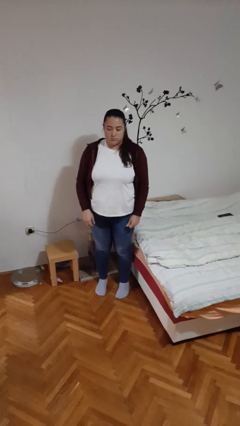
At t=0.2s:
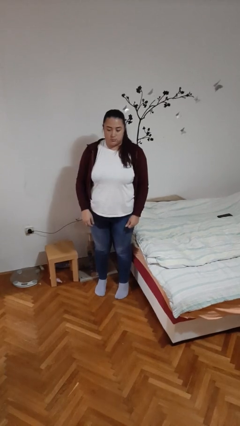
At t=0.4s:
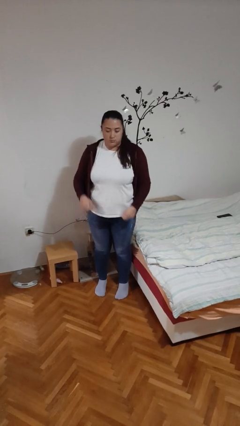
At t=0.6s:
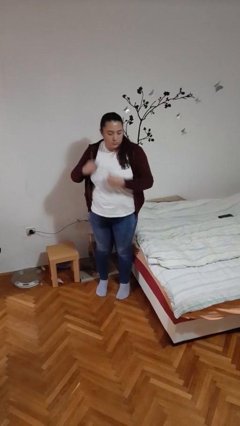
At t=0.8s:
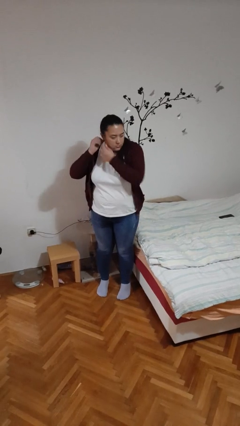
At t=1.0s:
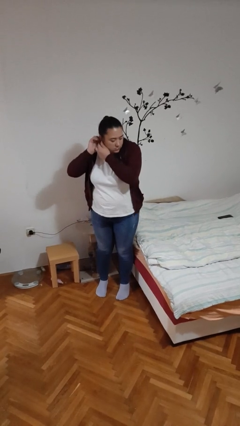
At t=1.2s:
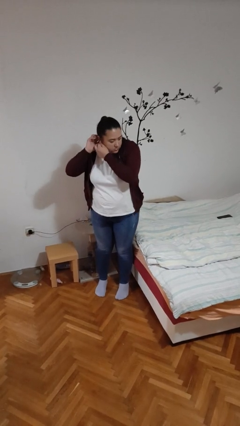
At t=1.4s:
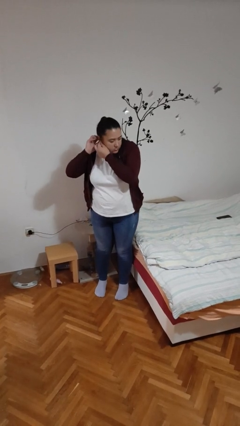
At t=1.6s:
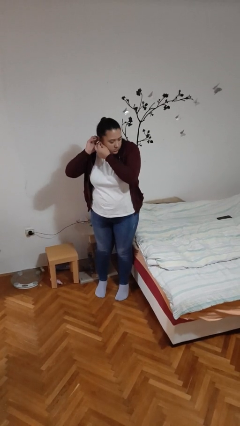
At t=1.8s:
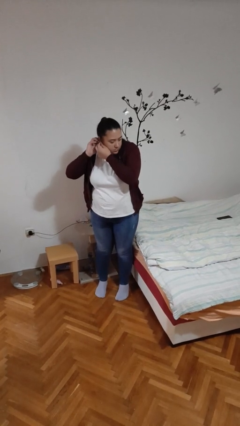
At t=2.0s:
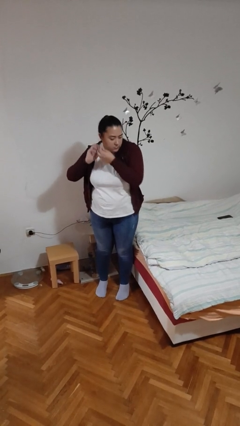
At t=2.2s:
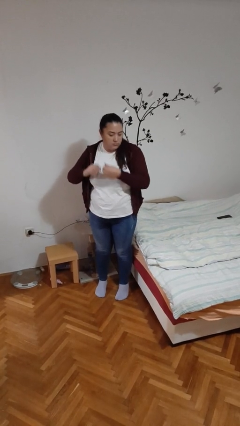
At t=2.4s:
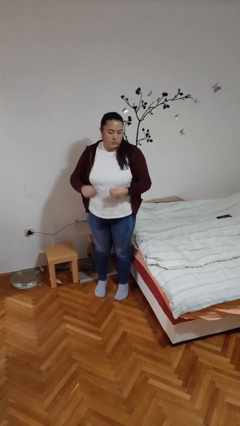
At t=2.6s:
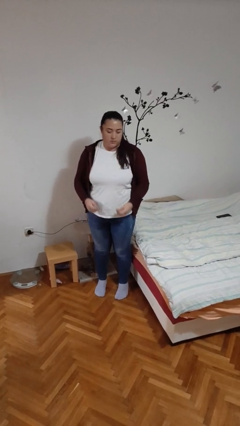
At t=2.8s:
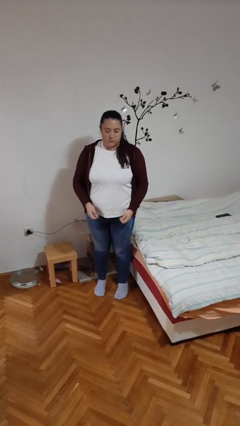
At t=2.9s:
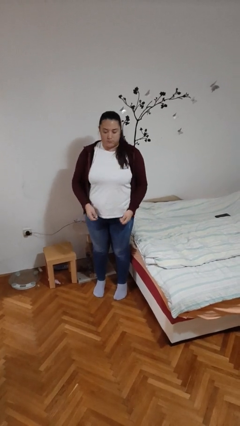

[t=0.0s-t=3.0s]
person takes off earrings

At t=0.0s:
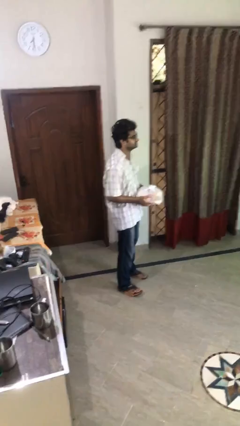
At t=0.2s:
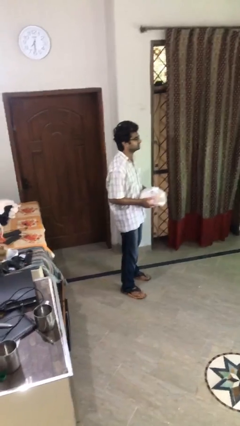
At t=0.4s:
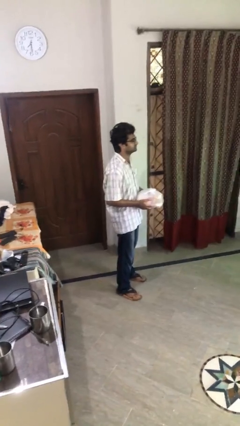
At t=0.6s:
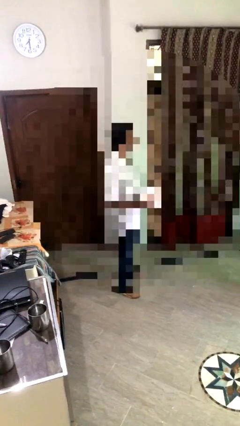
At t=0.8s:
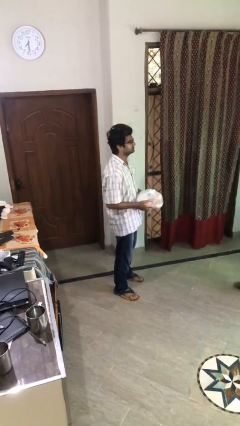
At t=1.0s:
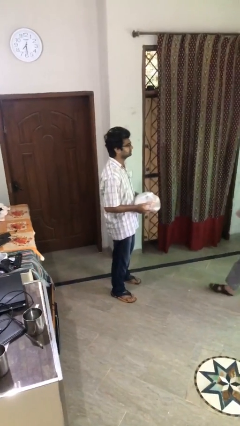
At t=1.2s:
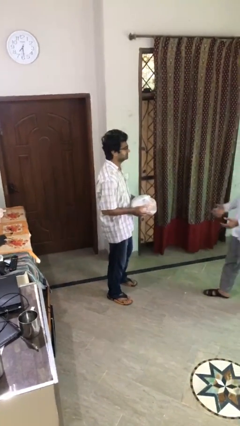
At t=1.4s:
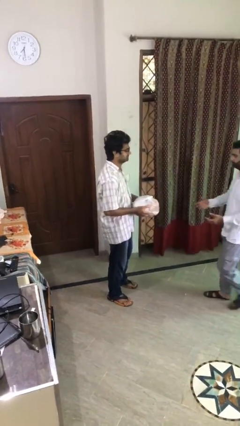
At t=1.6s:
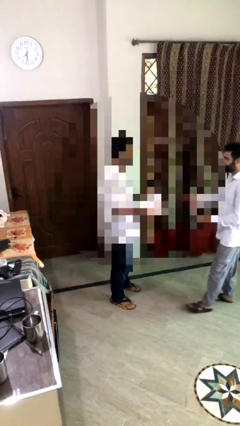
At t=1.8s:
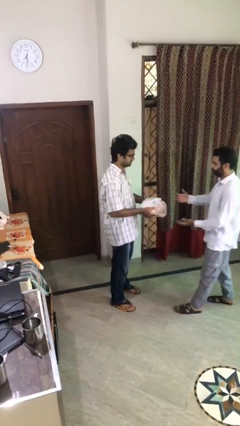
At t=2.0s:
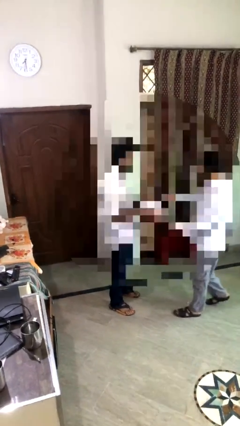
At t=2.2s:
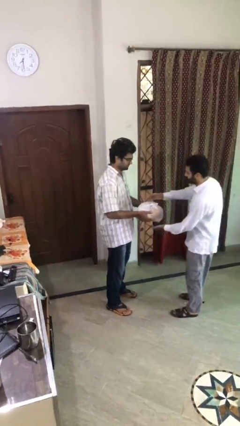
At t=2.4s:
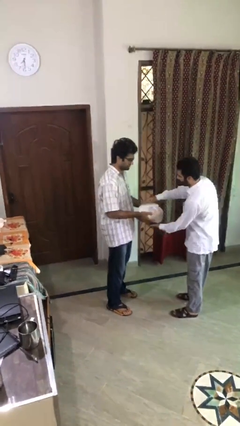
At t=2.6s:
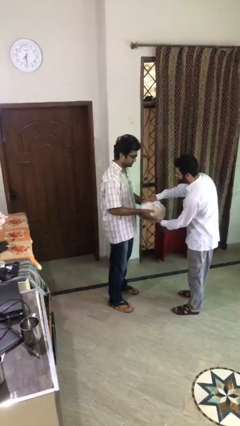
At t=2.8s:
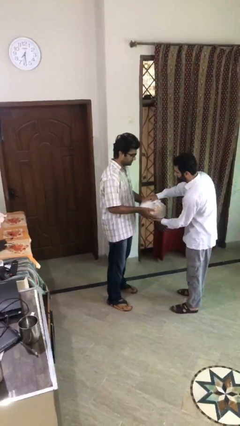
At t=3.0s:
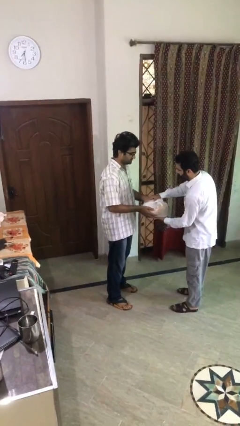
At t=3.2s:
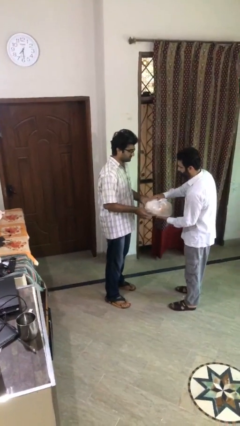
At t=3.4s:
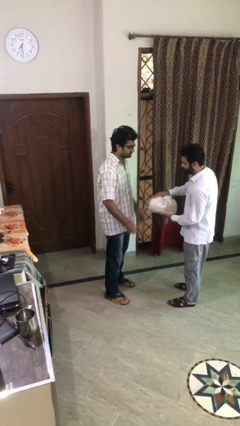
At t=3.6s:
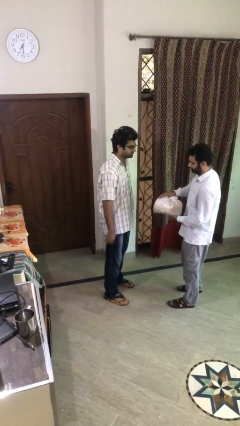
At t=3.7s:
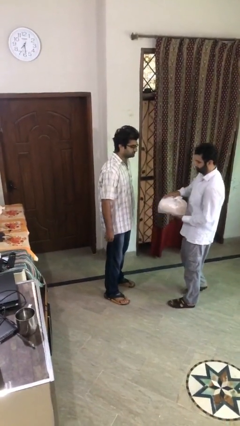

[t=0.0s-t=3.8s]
person transfers object to person

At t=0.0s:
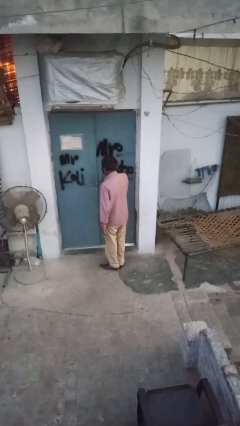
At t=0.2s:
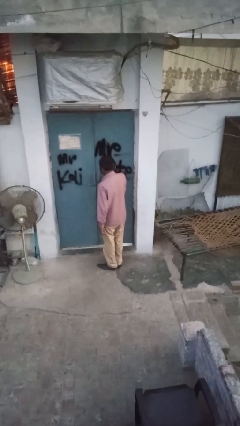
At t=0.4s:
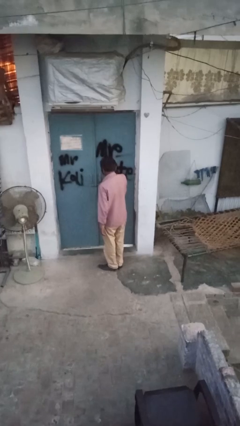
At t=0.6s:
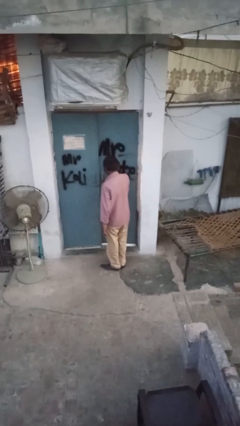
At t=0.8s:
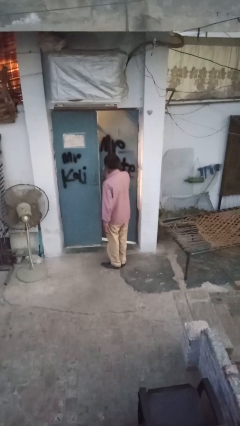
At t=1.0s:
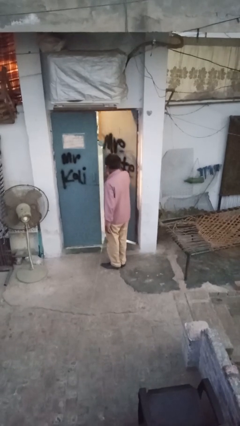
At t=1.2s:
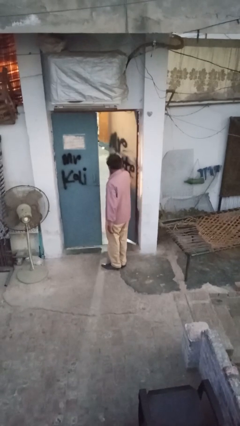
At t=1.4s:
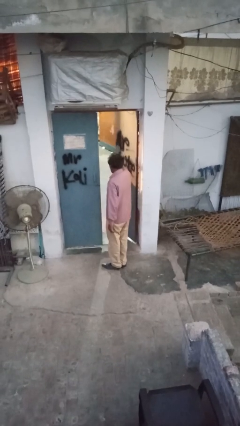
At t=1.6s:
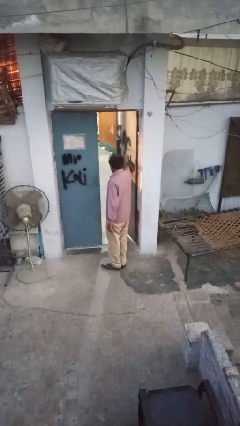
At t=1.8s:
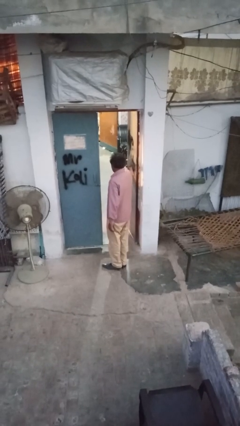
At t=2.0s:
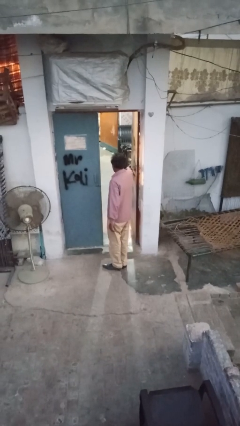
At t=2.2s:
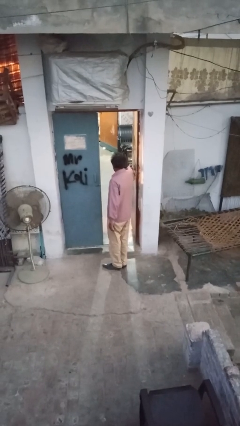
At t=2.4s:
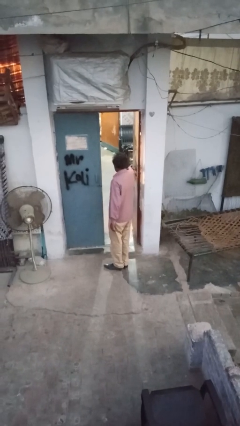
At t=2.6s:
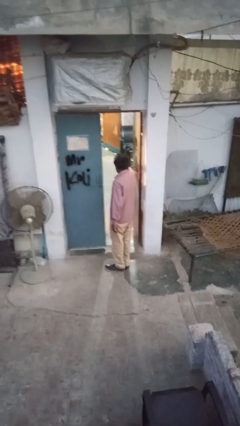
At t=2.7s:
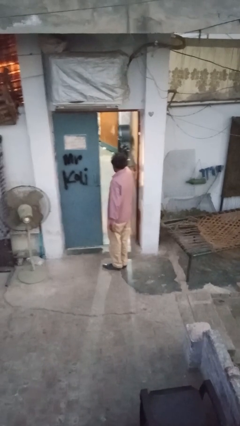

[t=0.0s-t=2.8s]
person opens facility door

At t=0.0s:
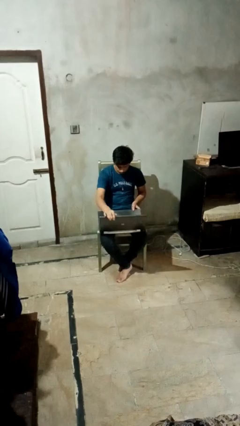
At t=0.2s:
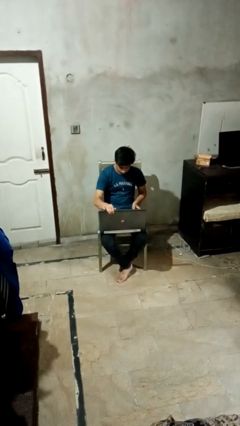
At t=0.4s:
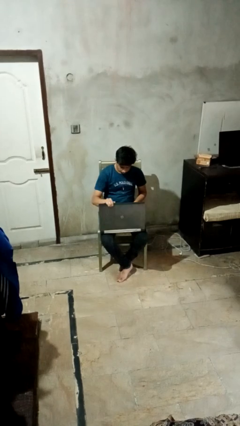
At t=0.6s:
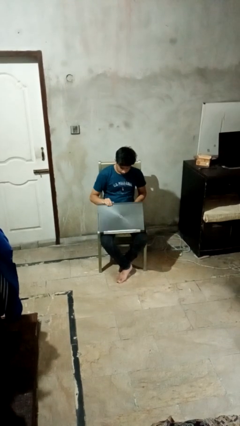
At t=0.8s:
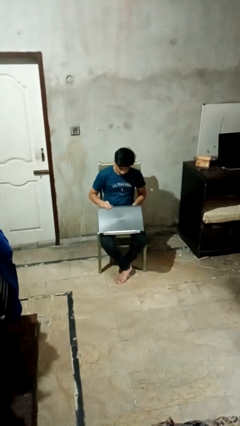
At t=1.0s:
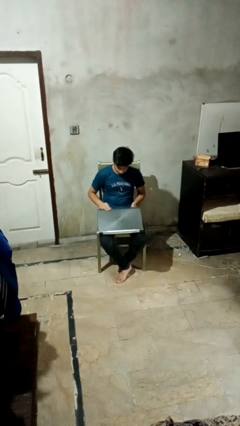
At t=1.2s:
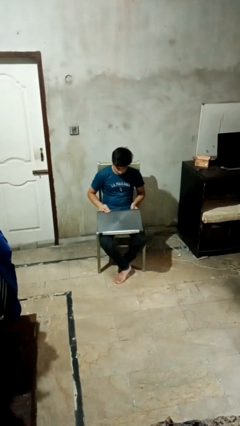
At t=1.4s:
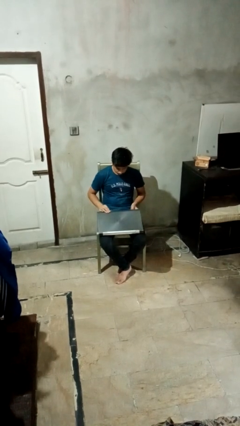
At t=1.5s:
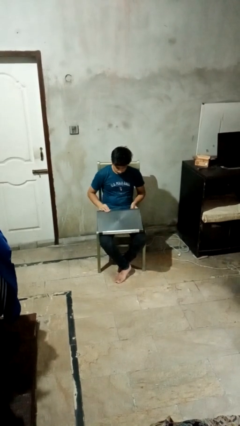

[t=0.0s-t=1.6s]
person closes laptop

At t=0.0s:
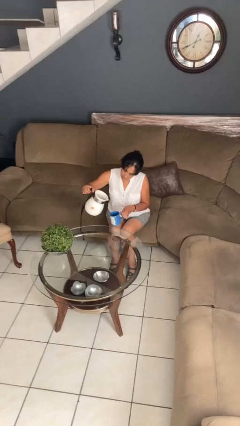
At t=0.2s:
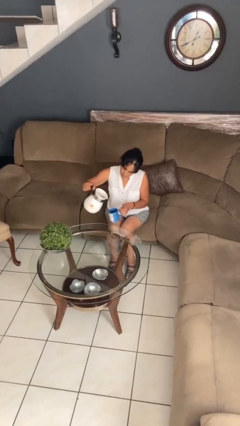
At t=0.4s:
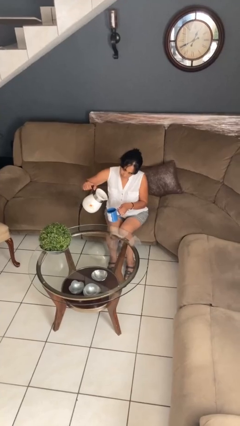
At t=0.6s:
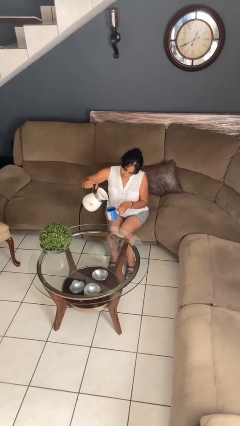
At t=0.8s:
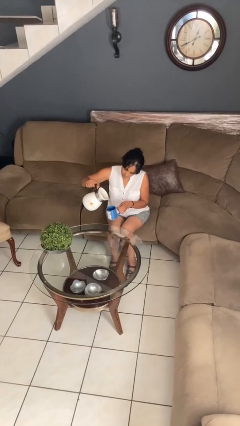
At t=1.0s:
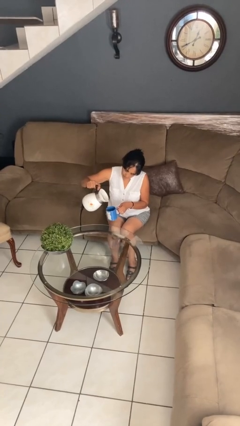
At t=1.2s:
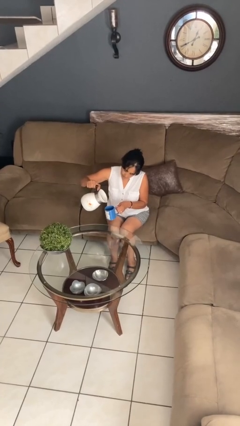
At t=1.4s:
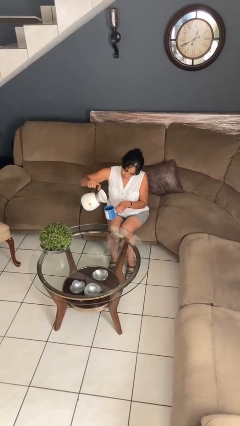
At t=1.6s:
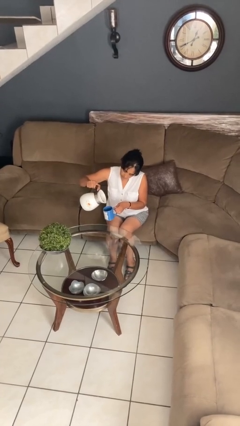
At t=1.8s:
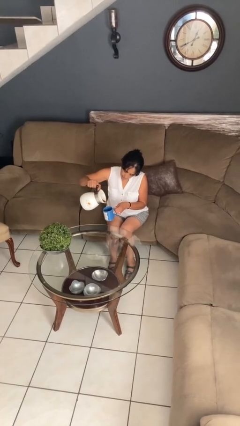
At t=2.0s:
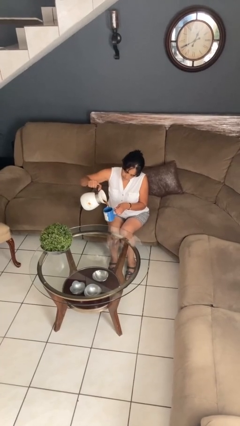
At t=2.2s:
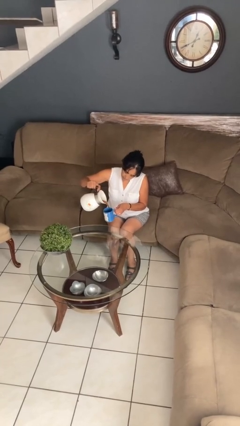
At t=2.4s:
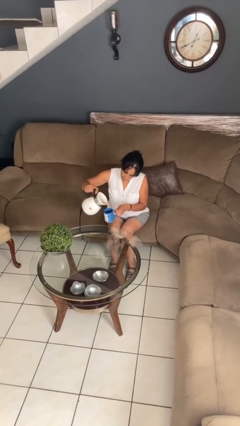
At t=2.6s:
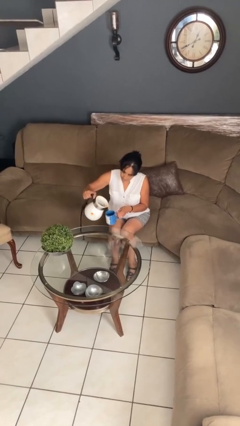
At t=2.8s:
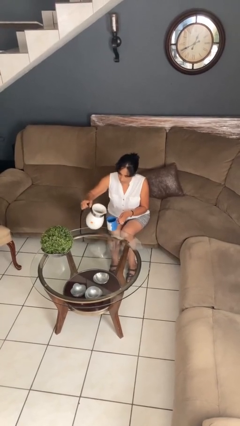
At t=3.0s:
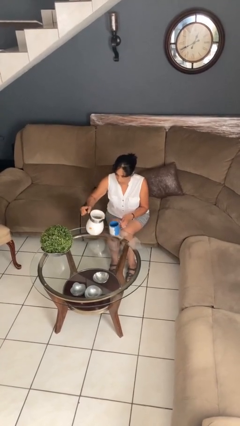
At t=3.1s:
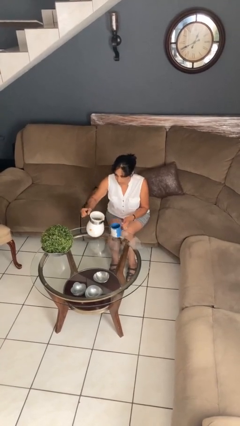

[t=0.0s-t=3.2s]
person pours coffee into mug

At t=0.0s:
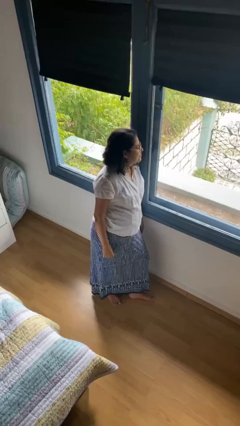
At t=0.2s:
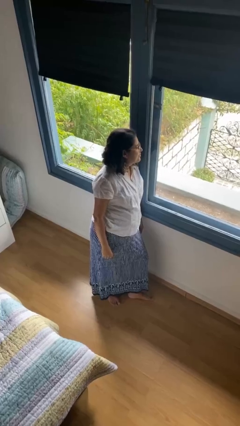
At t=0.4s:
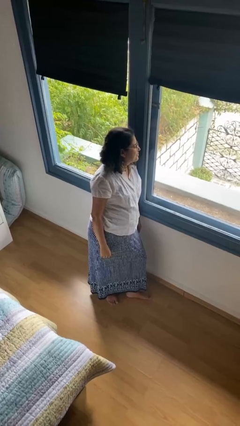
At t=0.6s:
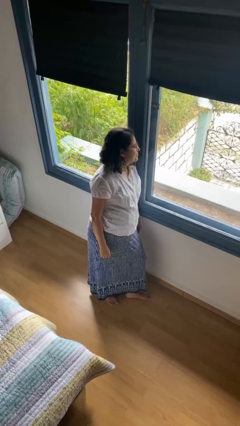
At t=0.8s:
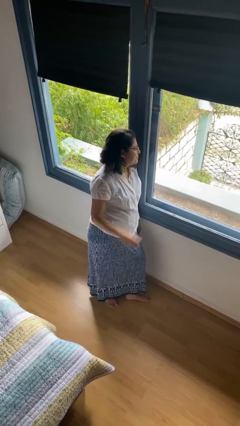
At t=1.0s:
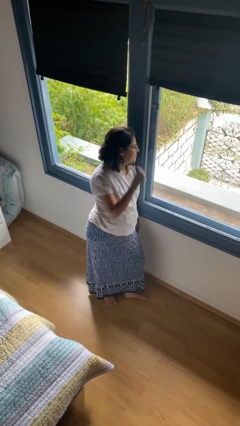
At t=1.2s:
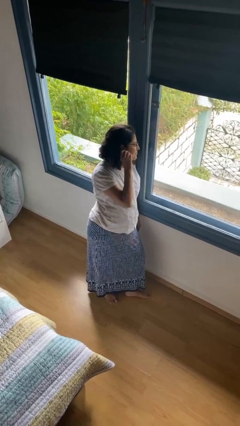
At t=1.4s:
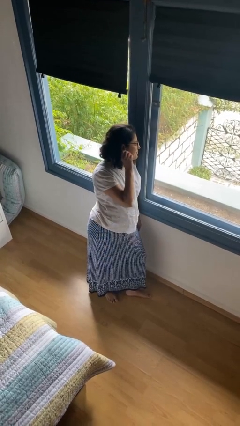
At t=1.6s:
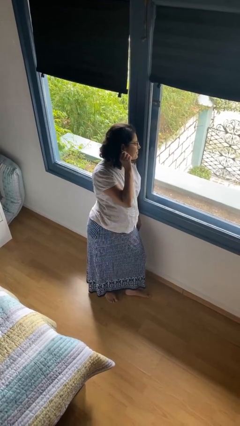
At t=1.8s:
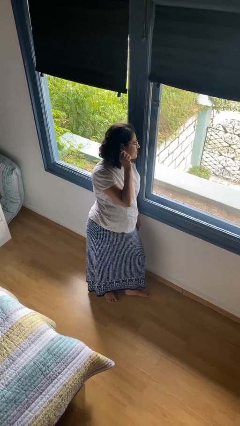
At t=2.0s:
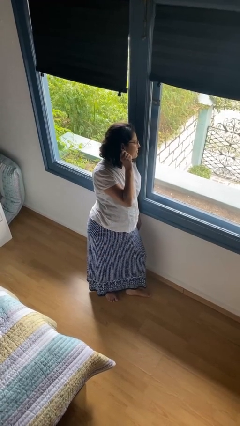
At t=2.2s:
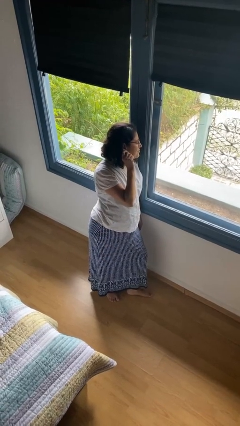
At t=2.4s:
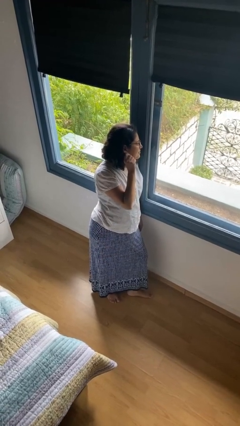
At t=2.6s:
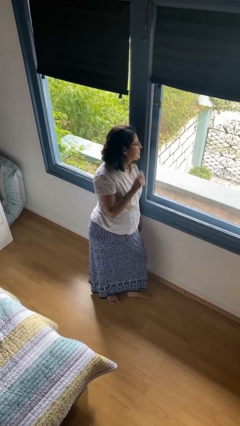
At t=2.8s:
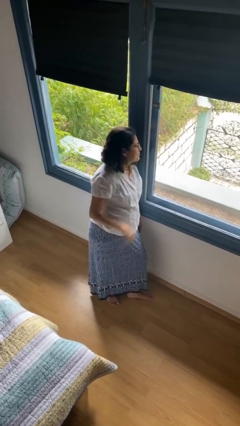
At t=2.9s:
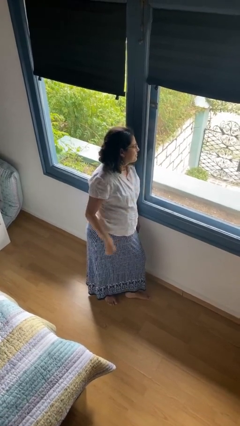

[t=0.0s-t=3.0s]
person touches earlobe
